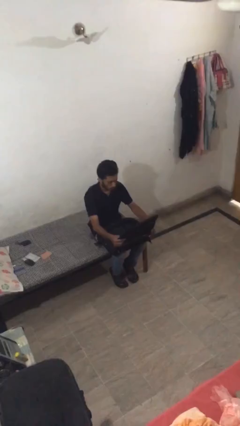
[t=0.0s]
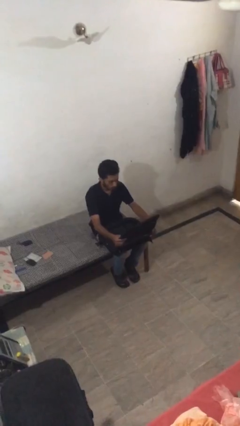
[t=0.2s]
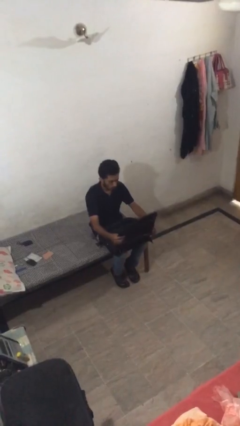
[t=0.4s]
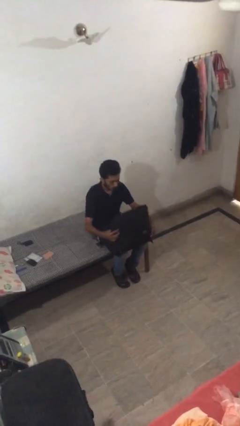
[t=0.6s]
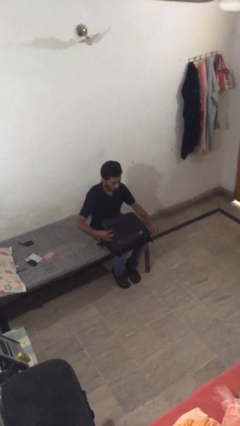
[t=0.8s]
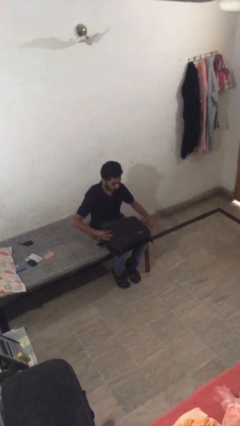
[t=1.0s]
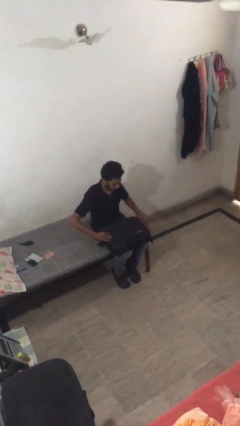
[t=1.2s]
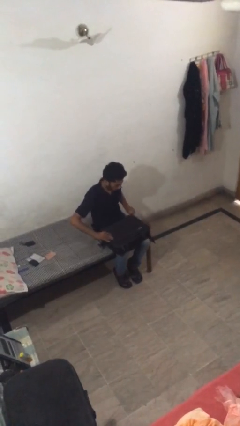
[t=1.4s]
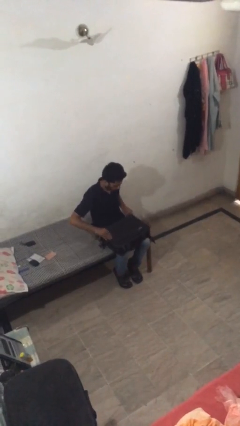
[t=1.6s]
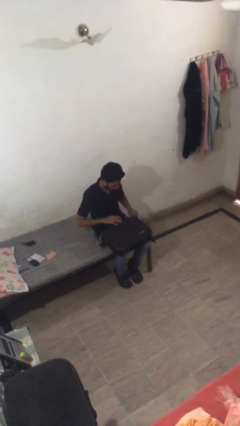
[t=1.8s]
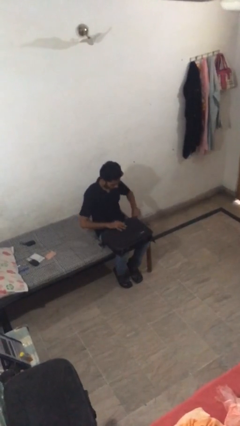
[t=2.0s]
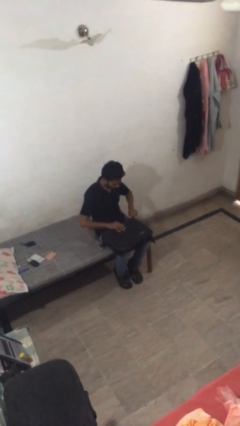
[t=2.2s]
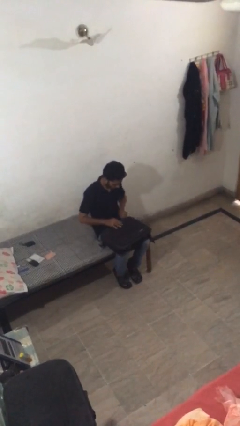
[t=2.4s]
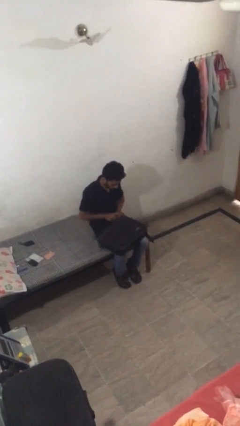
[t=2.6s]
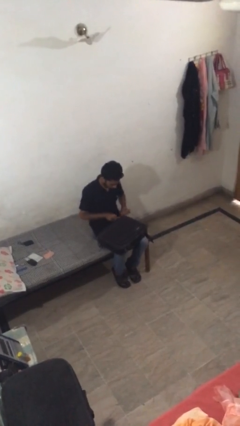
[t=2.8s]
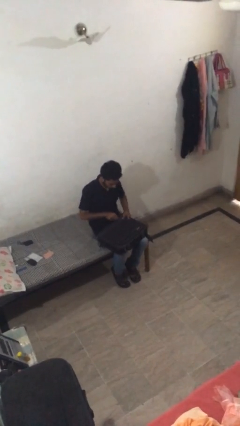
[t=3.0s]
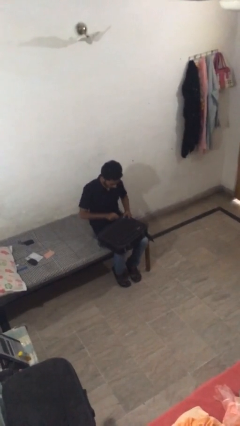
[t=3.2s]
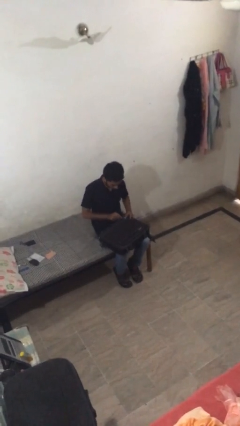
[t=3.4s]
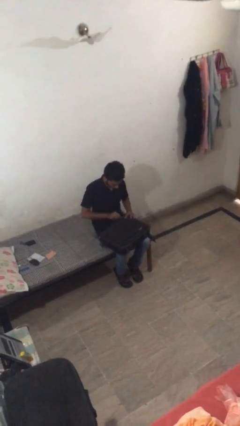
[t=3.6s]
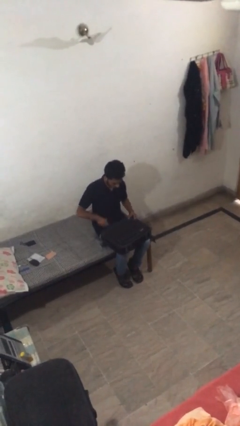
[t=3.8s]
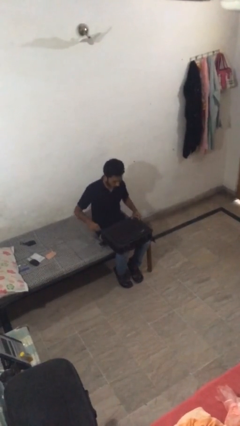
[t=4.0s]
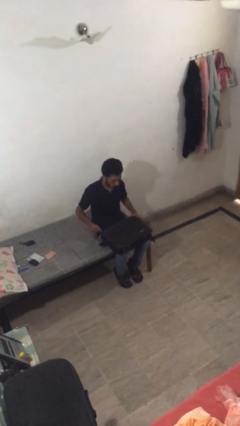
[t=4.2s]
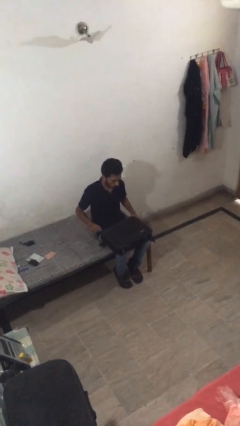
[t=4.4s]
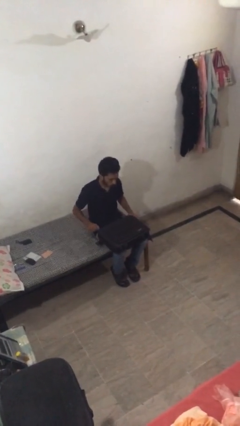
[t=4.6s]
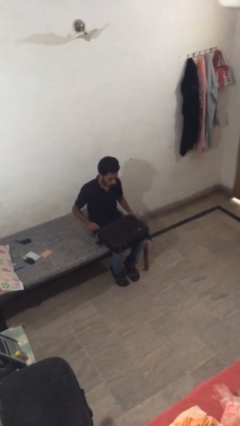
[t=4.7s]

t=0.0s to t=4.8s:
person closes suitcase

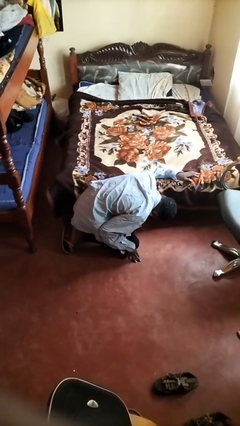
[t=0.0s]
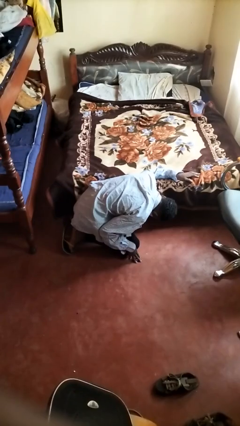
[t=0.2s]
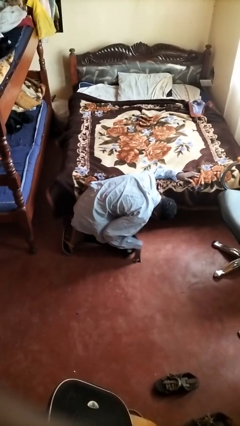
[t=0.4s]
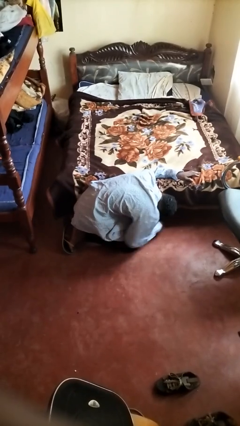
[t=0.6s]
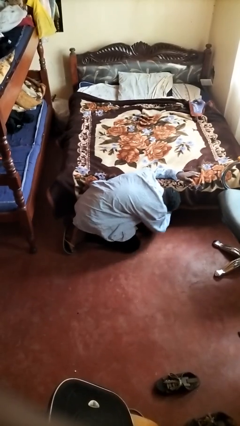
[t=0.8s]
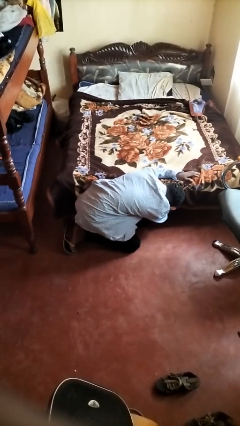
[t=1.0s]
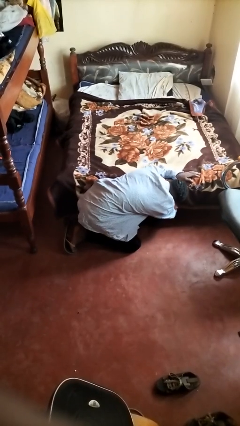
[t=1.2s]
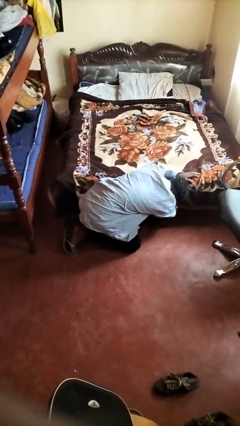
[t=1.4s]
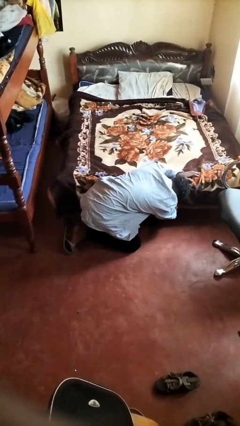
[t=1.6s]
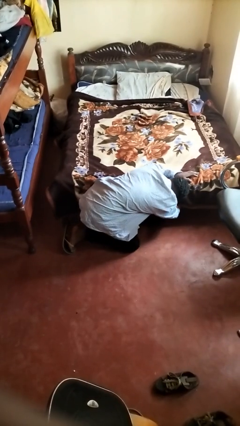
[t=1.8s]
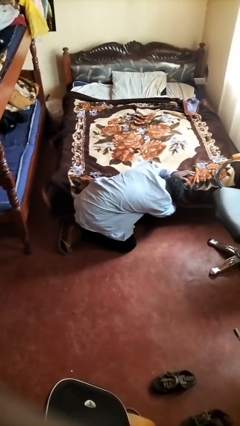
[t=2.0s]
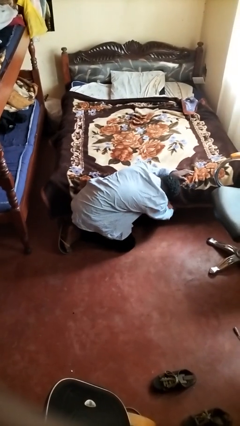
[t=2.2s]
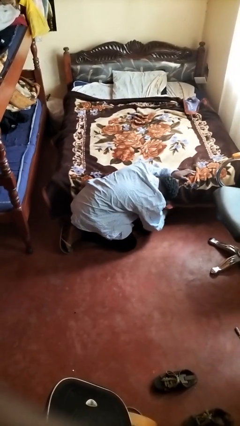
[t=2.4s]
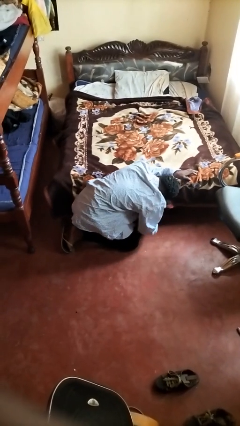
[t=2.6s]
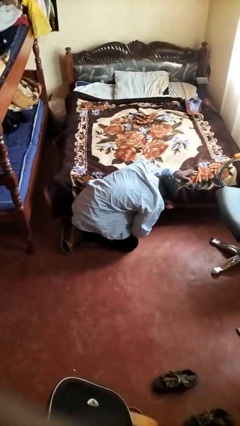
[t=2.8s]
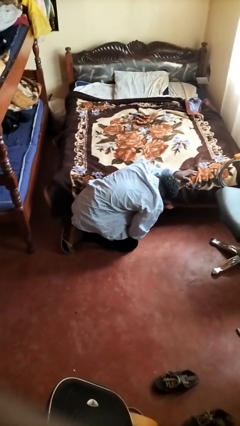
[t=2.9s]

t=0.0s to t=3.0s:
person searches under bed

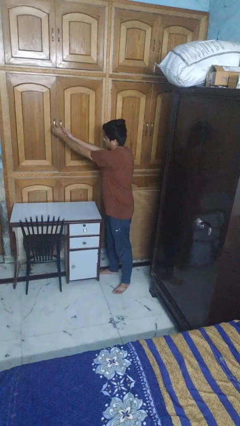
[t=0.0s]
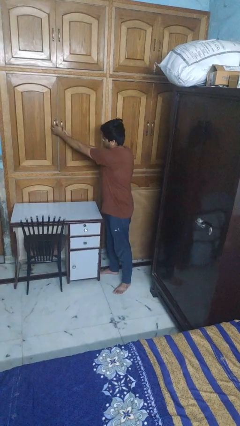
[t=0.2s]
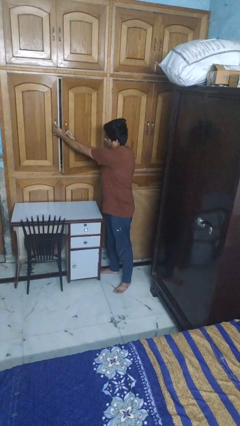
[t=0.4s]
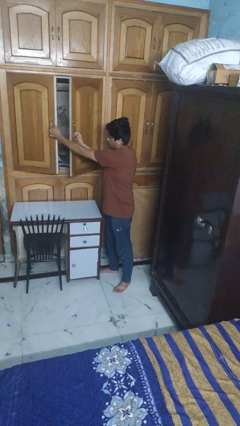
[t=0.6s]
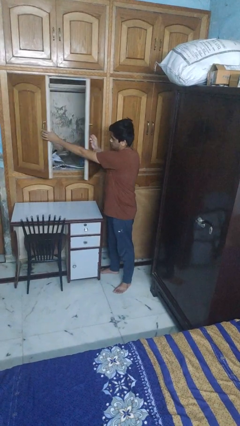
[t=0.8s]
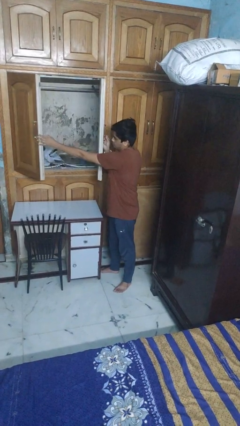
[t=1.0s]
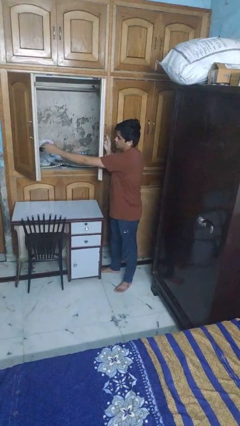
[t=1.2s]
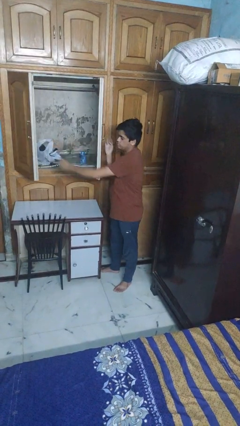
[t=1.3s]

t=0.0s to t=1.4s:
person opens closet door

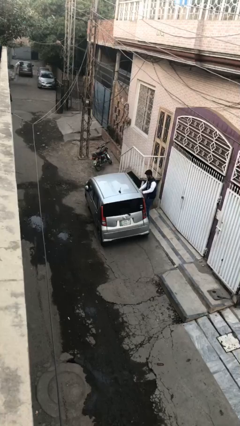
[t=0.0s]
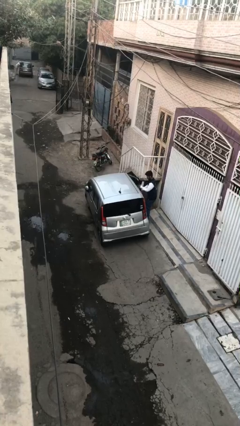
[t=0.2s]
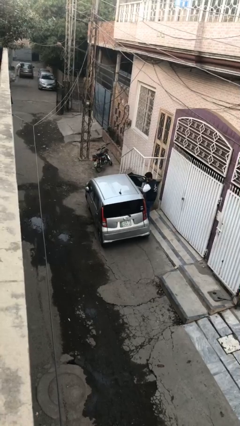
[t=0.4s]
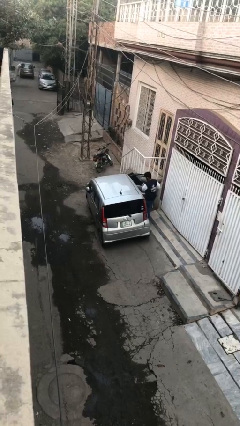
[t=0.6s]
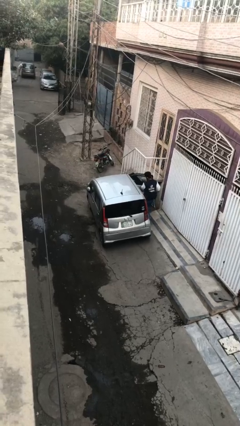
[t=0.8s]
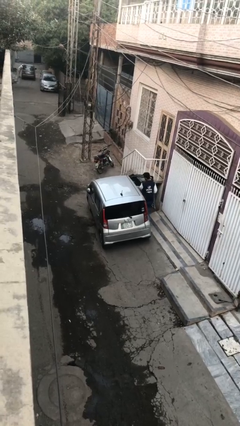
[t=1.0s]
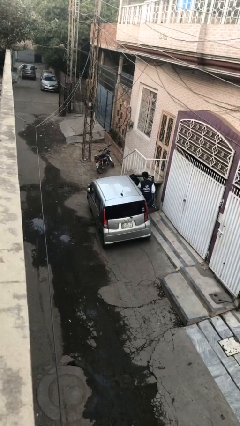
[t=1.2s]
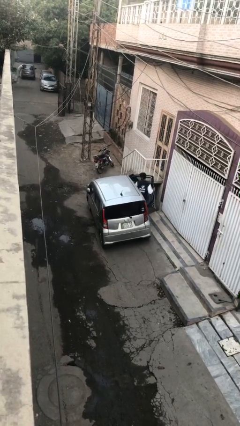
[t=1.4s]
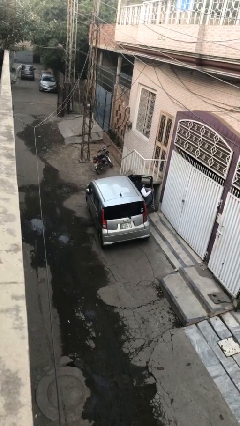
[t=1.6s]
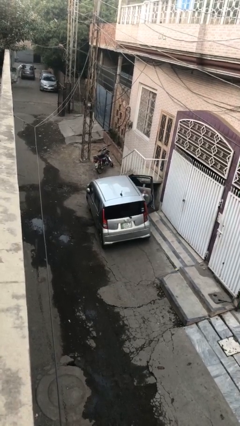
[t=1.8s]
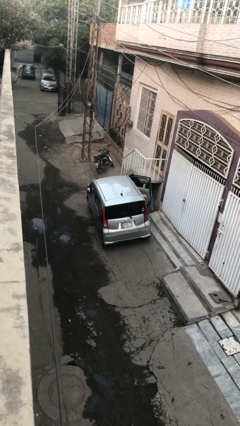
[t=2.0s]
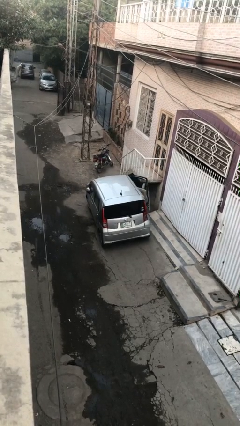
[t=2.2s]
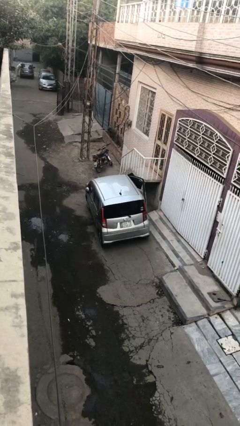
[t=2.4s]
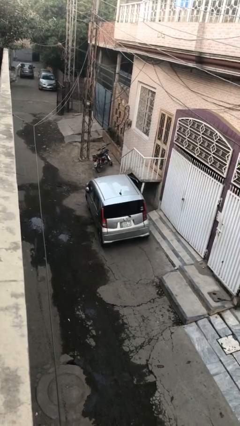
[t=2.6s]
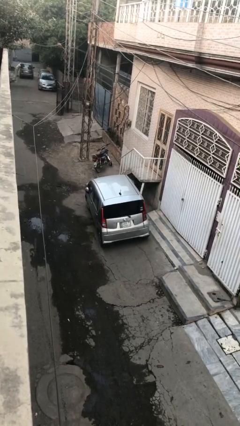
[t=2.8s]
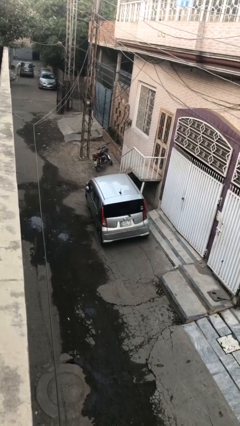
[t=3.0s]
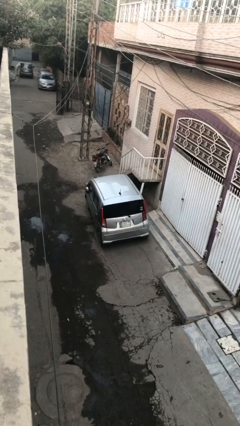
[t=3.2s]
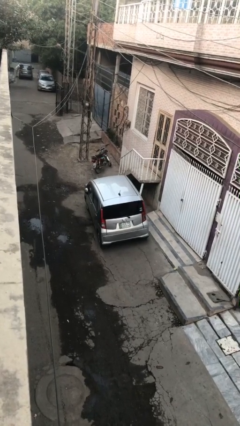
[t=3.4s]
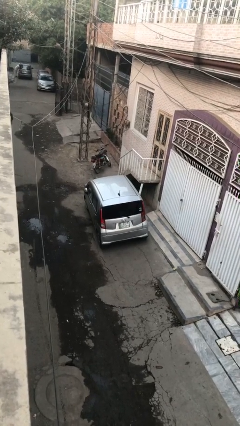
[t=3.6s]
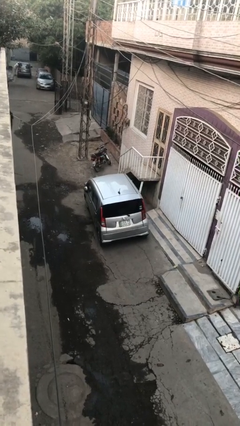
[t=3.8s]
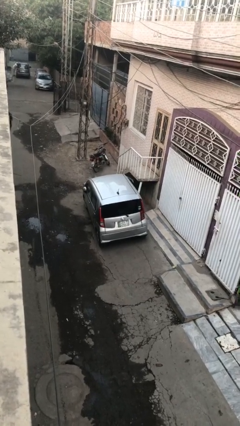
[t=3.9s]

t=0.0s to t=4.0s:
car picks up person

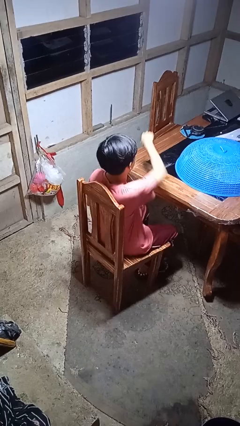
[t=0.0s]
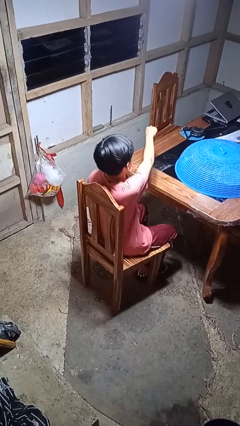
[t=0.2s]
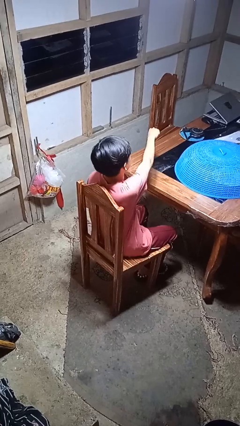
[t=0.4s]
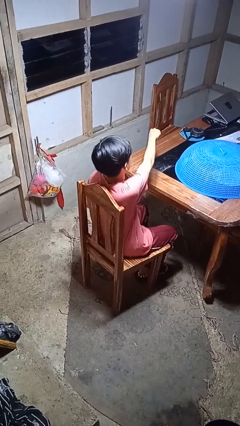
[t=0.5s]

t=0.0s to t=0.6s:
person punches

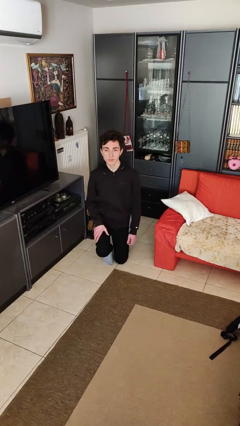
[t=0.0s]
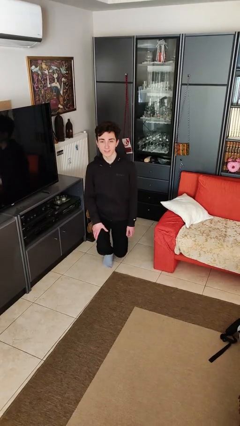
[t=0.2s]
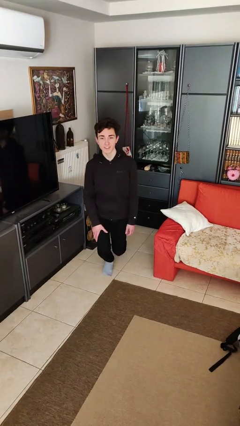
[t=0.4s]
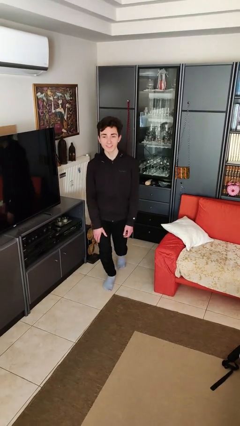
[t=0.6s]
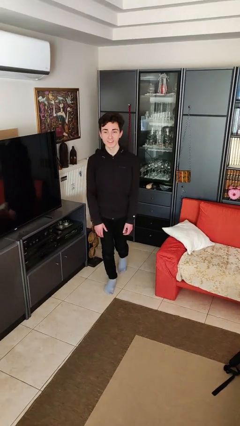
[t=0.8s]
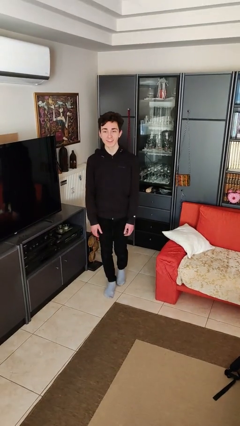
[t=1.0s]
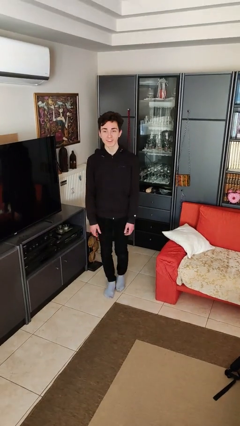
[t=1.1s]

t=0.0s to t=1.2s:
person stands up from floor

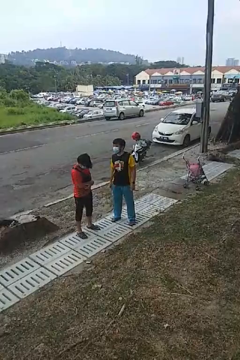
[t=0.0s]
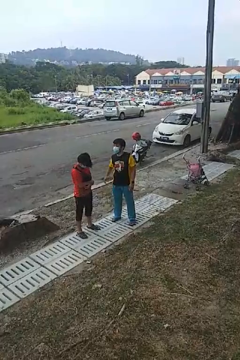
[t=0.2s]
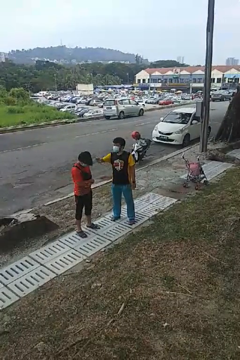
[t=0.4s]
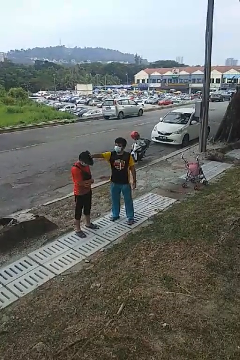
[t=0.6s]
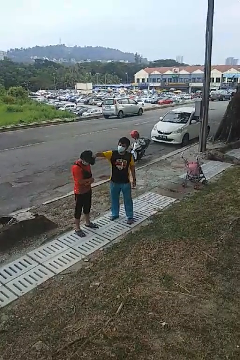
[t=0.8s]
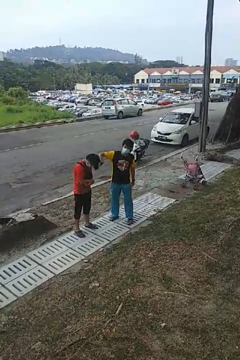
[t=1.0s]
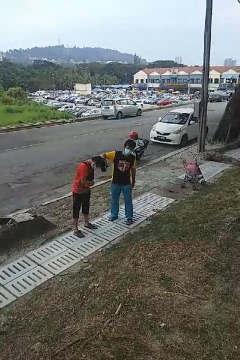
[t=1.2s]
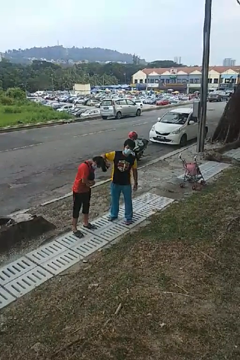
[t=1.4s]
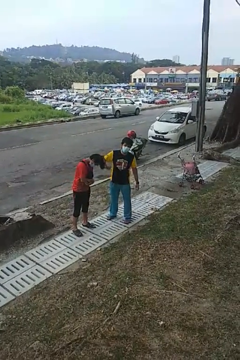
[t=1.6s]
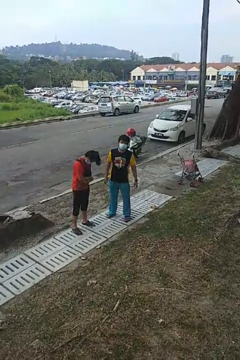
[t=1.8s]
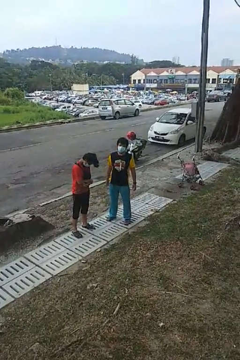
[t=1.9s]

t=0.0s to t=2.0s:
person grabs person by hair

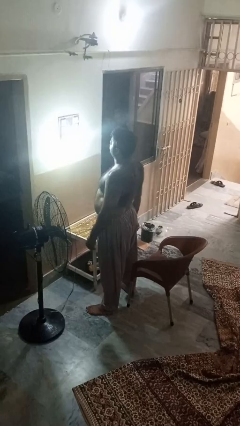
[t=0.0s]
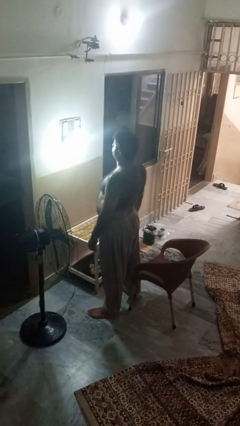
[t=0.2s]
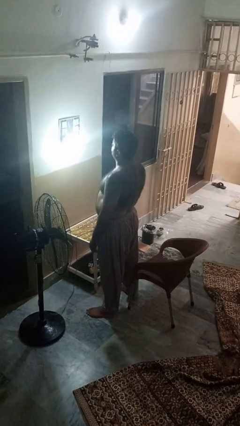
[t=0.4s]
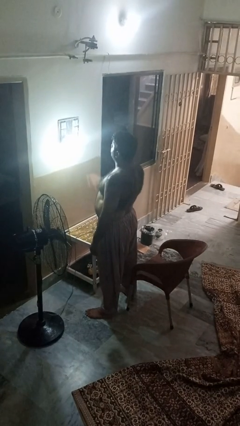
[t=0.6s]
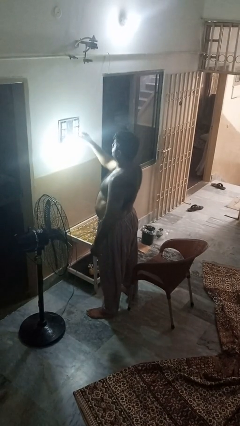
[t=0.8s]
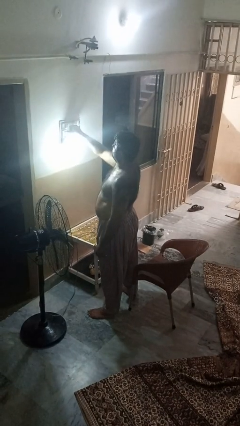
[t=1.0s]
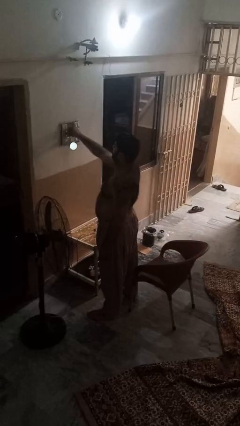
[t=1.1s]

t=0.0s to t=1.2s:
person turns off lamp
